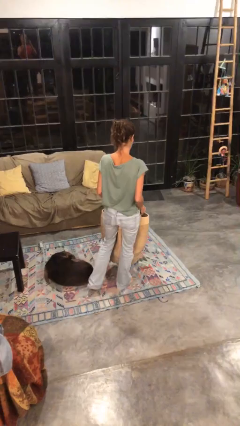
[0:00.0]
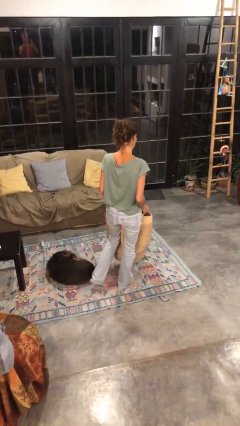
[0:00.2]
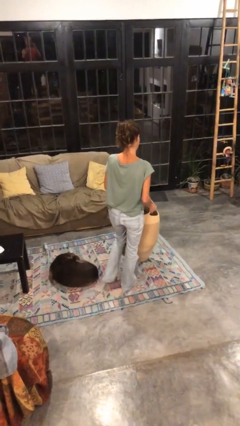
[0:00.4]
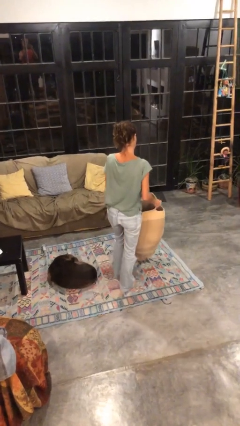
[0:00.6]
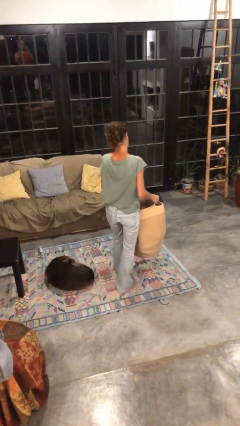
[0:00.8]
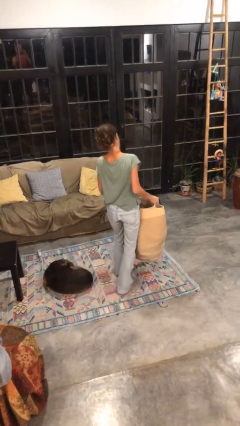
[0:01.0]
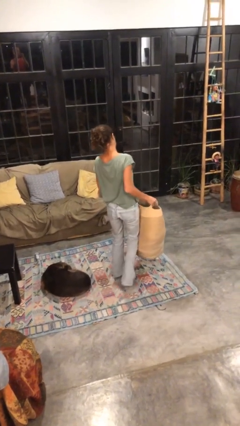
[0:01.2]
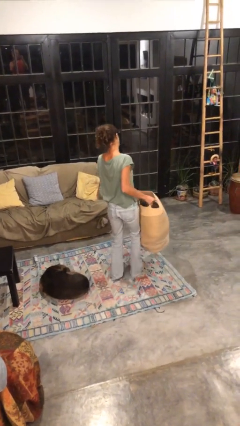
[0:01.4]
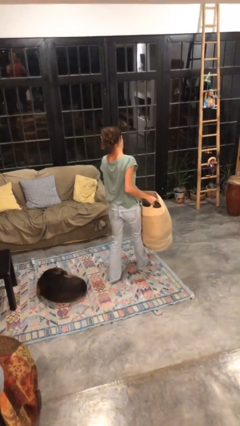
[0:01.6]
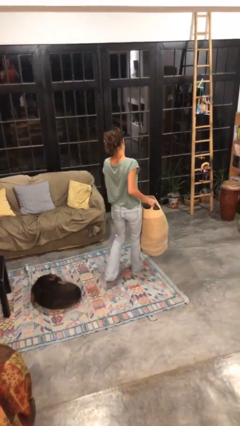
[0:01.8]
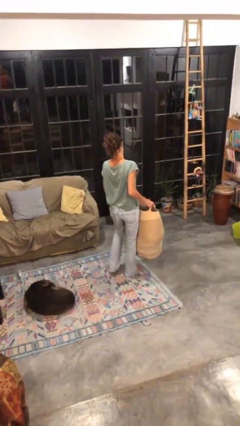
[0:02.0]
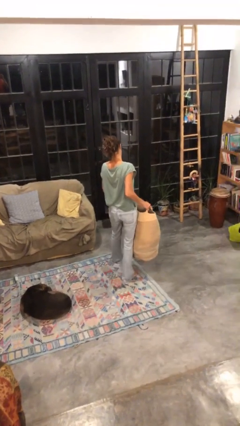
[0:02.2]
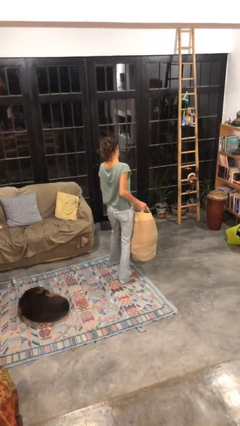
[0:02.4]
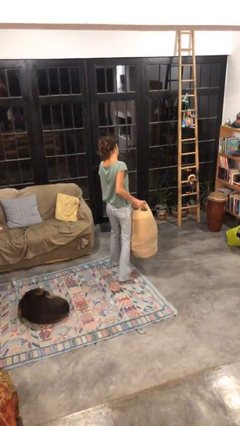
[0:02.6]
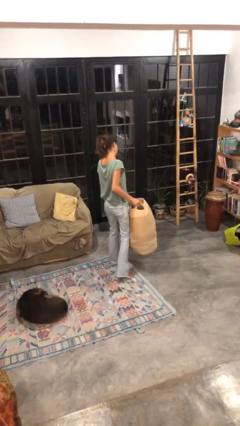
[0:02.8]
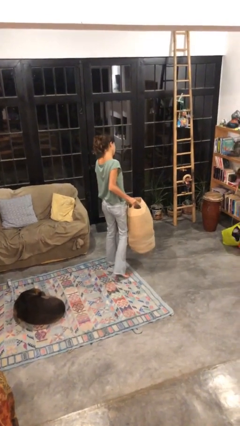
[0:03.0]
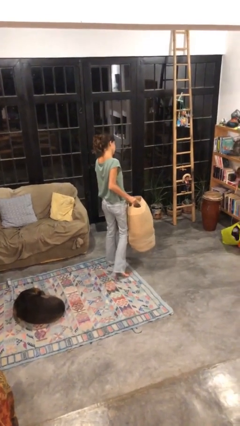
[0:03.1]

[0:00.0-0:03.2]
person carries laundry basket

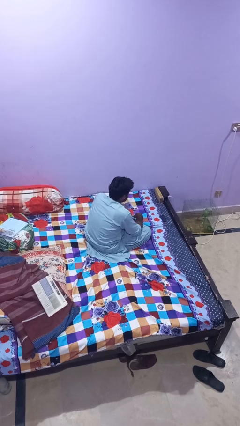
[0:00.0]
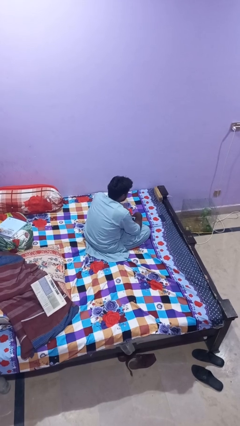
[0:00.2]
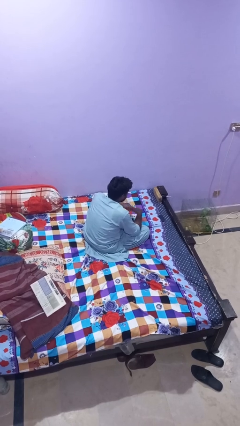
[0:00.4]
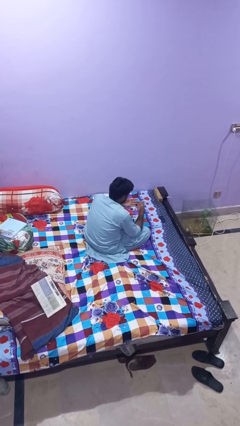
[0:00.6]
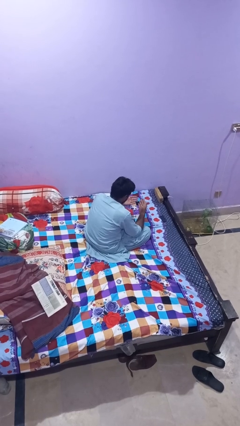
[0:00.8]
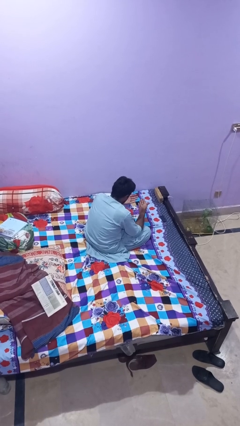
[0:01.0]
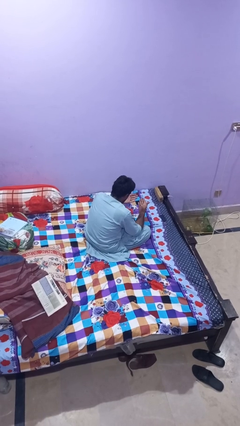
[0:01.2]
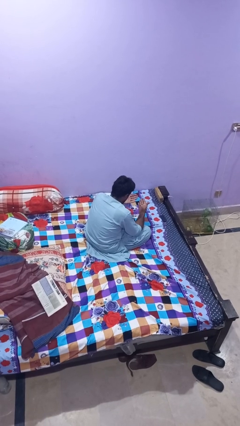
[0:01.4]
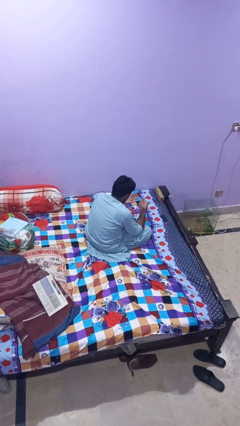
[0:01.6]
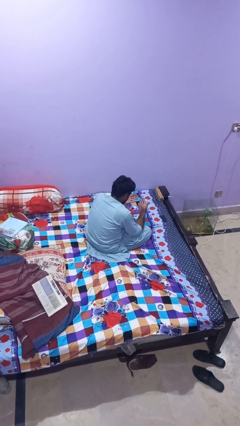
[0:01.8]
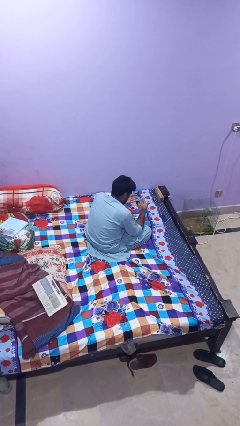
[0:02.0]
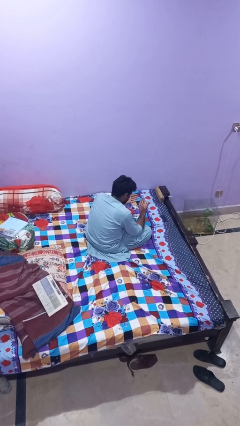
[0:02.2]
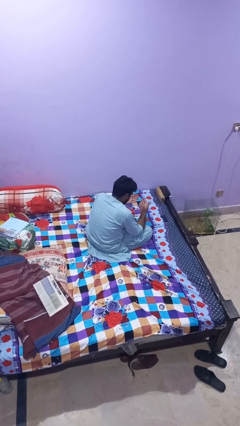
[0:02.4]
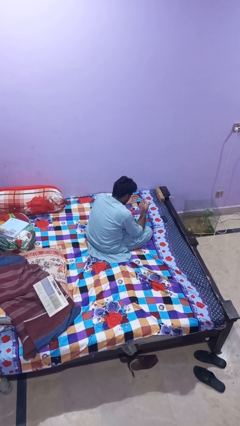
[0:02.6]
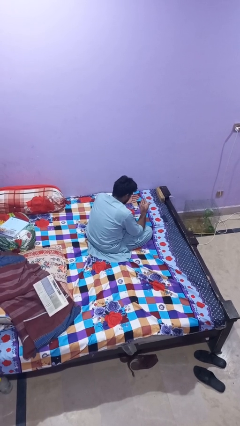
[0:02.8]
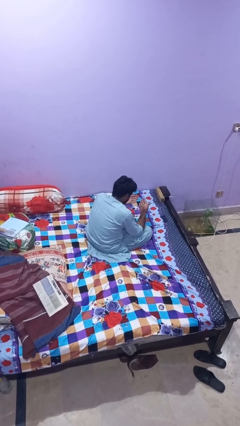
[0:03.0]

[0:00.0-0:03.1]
person looks at hands in lap

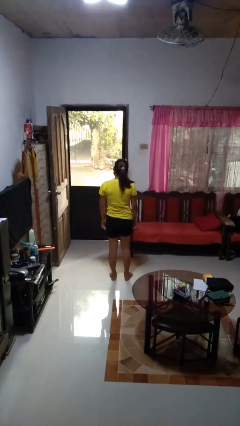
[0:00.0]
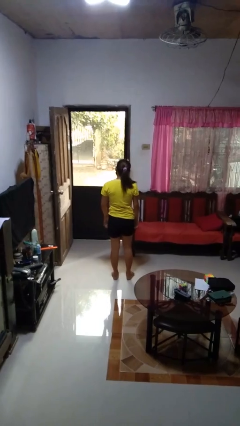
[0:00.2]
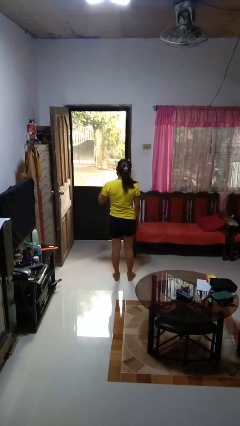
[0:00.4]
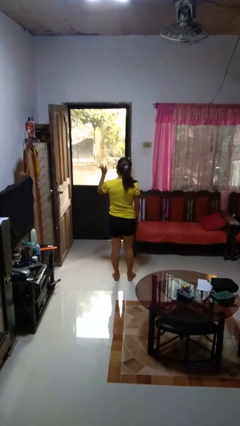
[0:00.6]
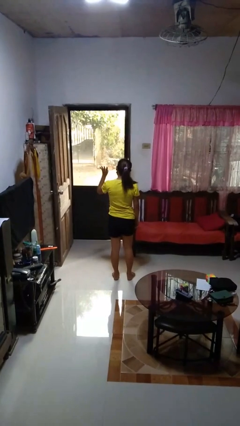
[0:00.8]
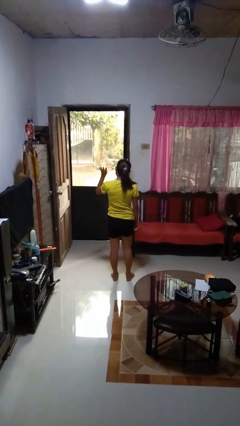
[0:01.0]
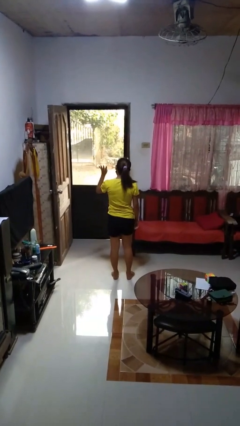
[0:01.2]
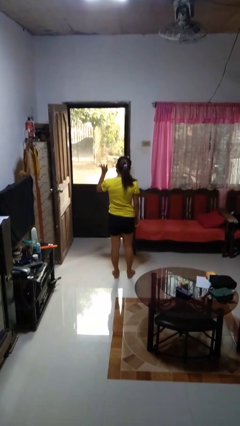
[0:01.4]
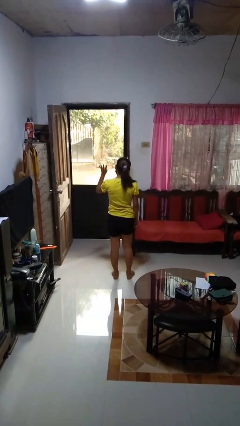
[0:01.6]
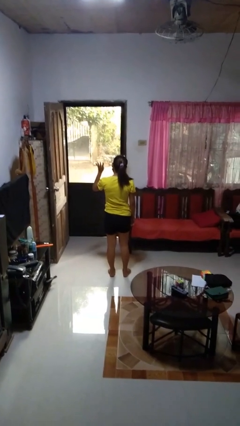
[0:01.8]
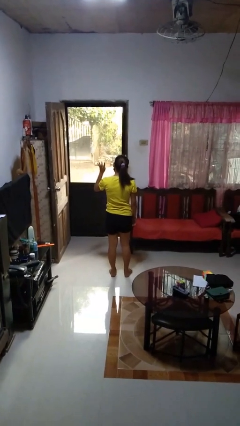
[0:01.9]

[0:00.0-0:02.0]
person gestures number four

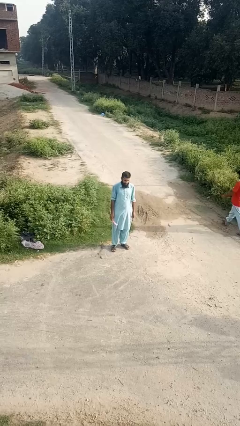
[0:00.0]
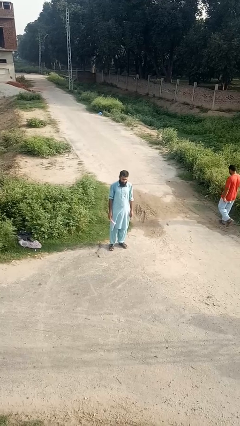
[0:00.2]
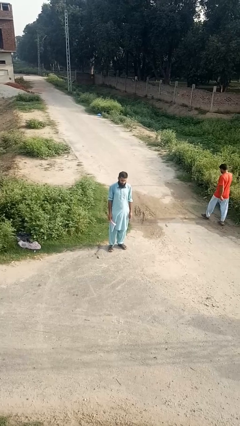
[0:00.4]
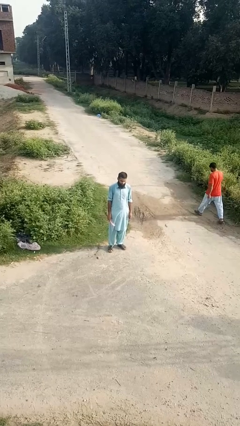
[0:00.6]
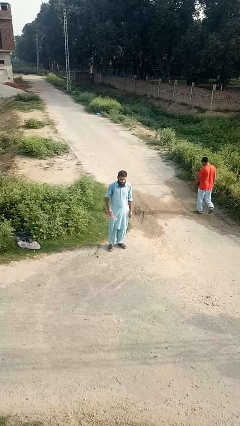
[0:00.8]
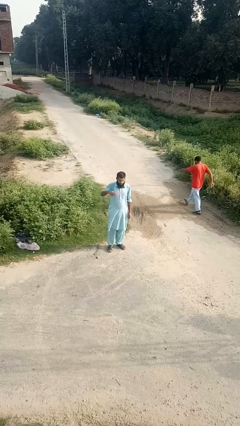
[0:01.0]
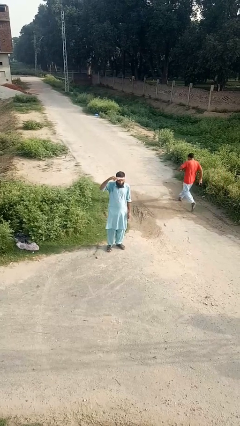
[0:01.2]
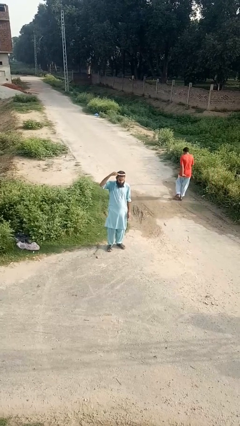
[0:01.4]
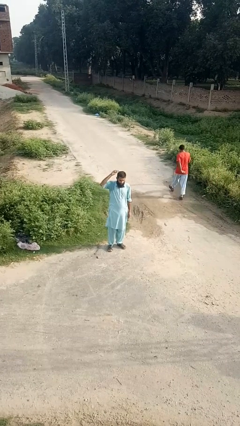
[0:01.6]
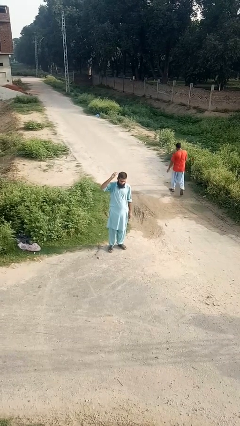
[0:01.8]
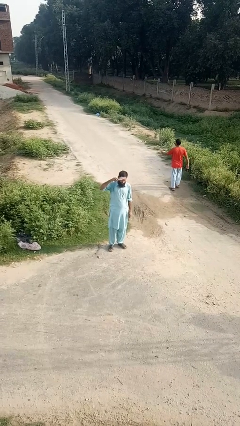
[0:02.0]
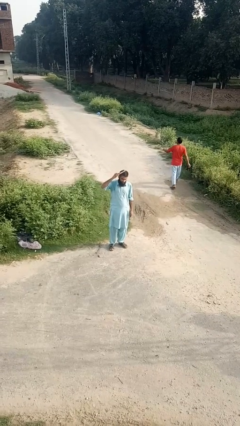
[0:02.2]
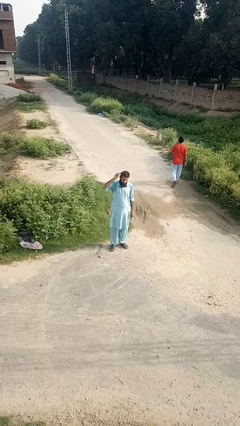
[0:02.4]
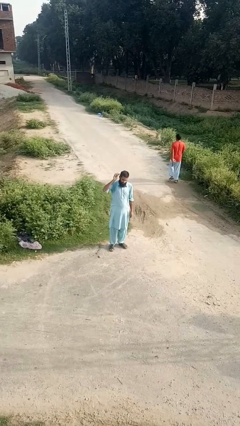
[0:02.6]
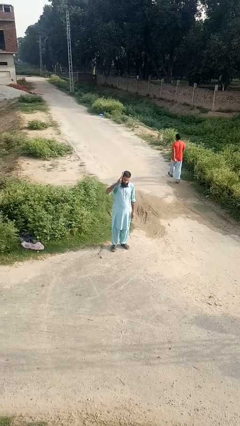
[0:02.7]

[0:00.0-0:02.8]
person brushes hair

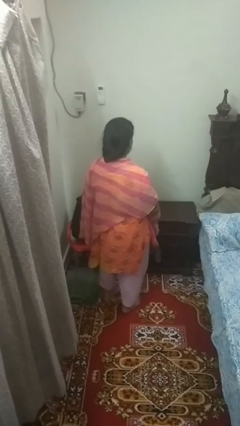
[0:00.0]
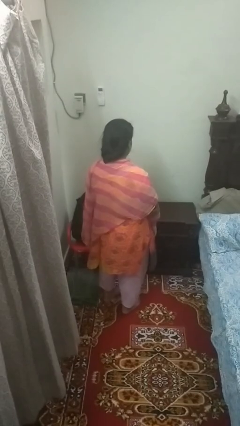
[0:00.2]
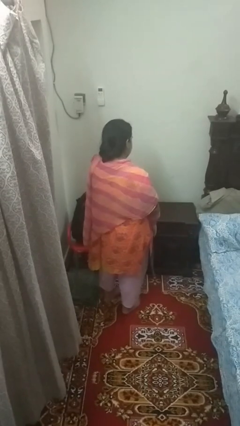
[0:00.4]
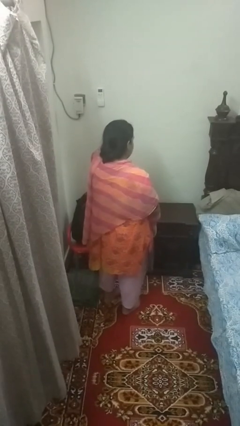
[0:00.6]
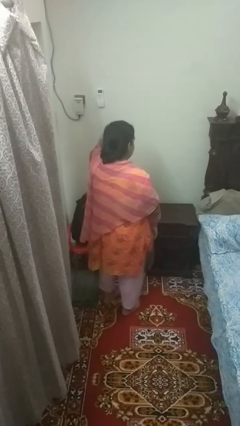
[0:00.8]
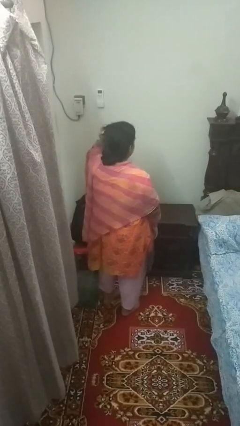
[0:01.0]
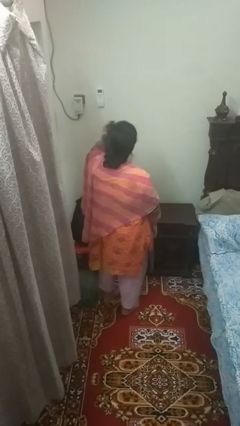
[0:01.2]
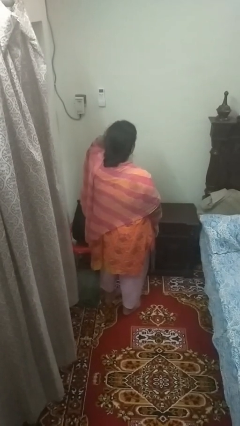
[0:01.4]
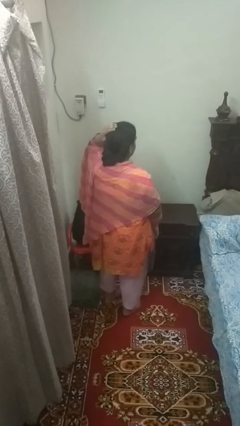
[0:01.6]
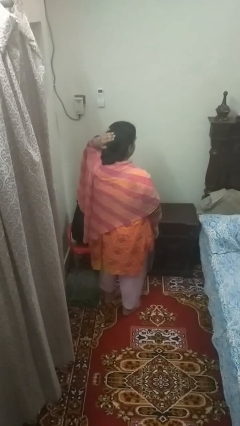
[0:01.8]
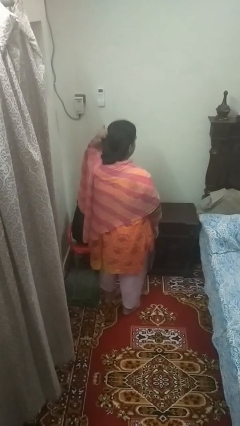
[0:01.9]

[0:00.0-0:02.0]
person strokes hair

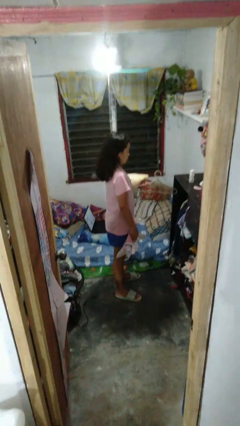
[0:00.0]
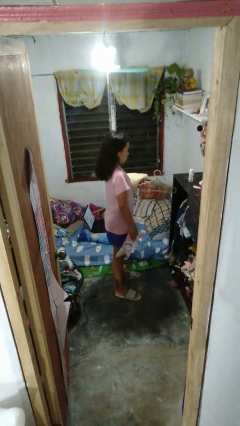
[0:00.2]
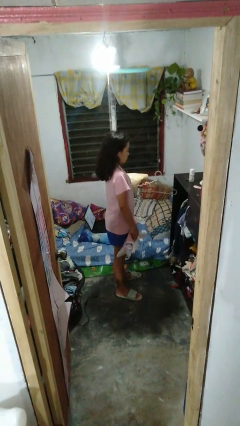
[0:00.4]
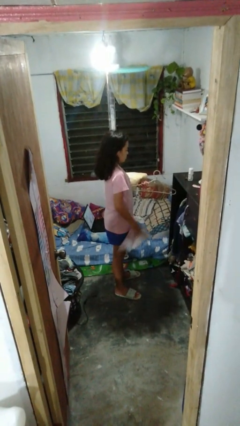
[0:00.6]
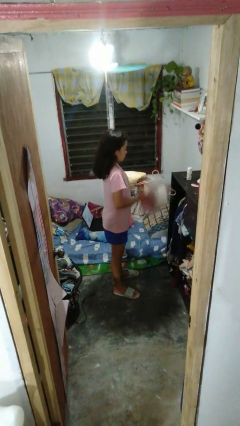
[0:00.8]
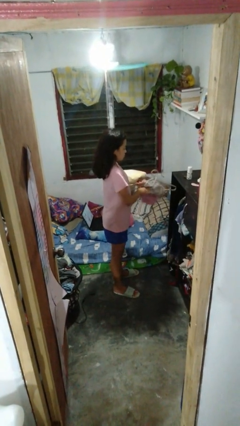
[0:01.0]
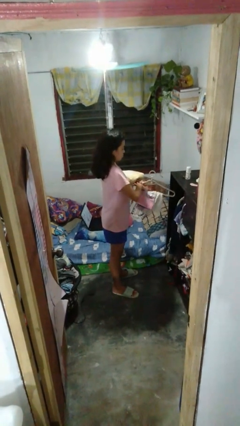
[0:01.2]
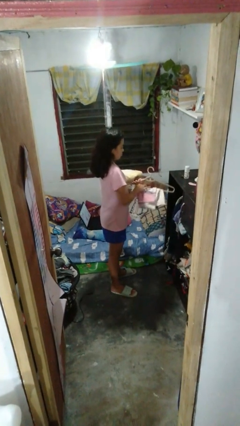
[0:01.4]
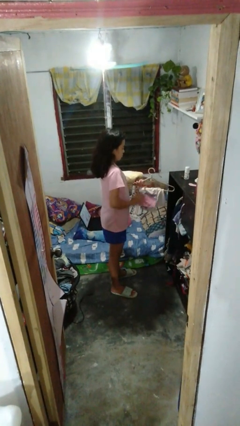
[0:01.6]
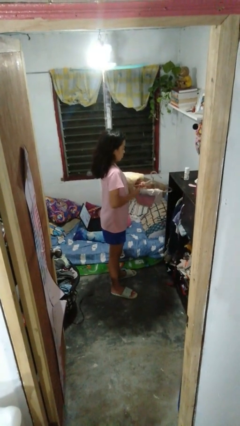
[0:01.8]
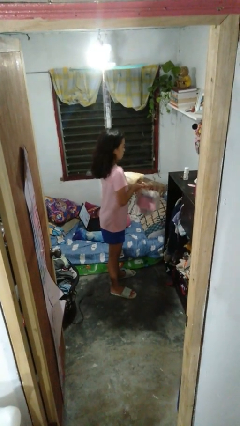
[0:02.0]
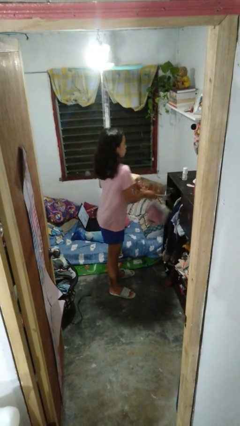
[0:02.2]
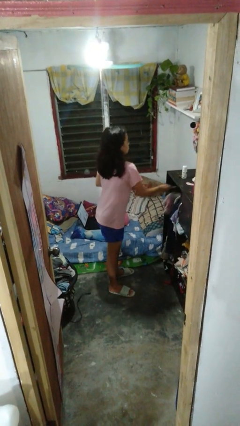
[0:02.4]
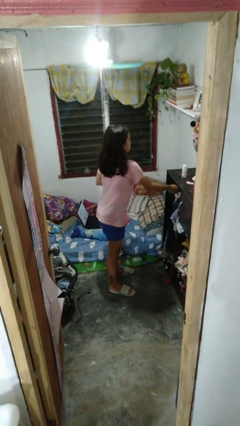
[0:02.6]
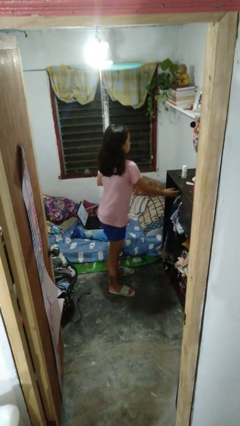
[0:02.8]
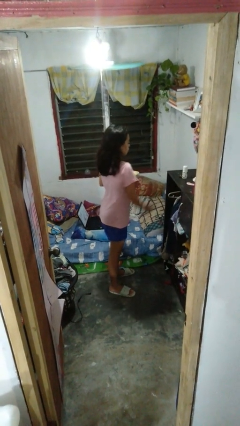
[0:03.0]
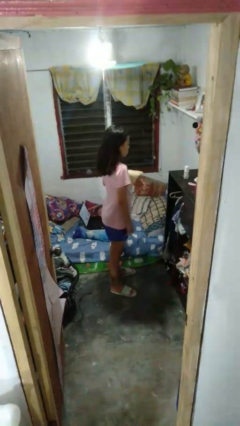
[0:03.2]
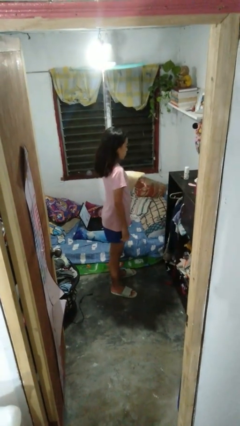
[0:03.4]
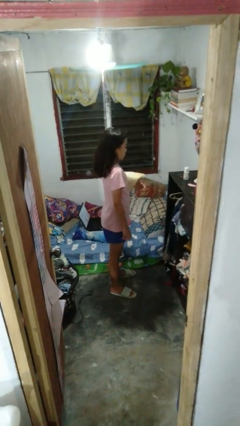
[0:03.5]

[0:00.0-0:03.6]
person puts clothes into closet

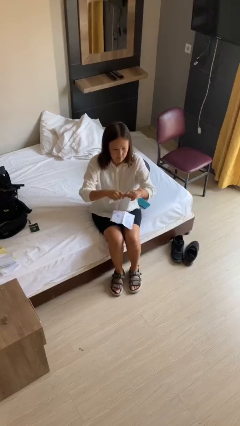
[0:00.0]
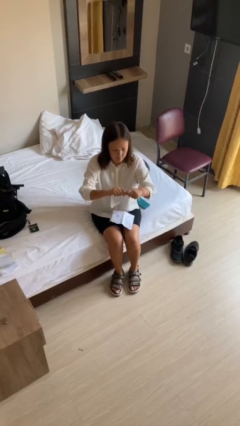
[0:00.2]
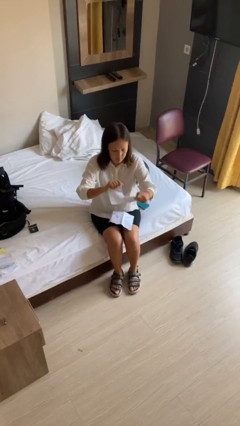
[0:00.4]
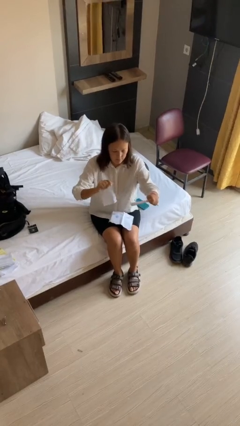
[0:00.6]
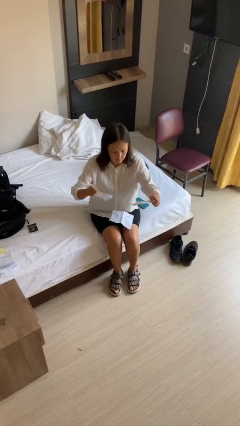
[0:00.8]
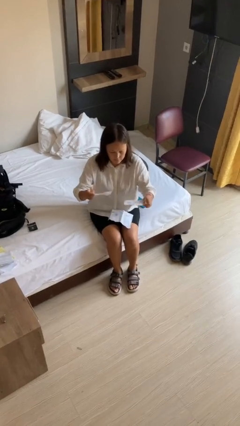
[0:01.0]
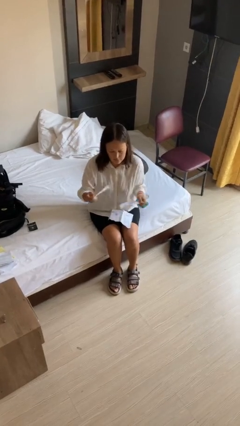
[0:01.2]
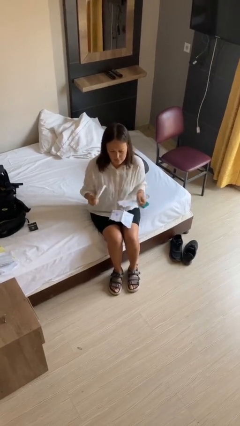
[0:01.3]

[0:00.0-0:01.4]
person tears paper
